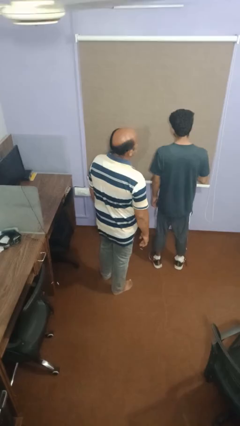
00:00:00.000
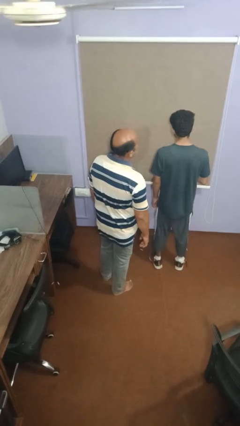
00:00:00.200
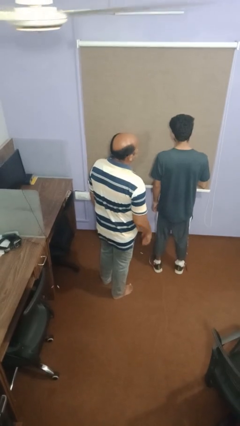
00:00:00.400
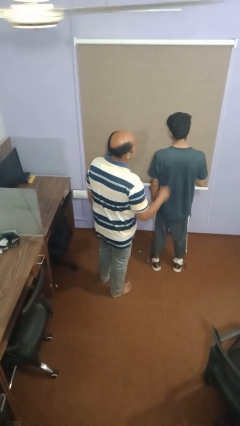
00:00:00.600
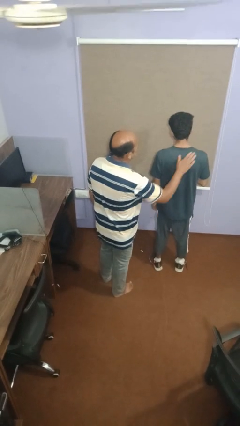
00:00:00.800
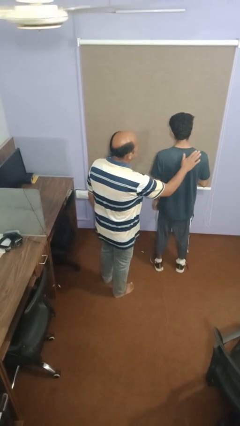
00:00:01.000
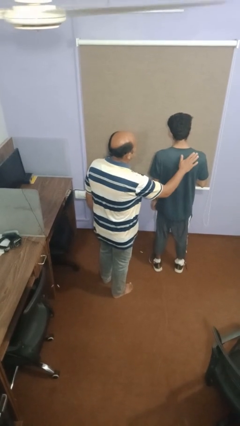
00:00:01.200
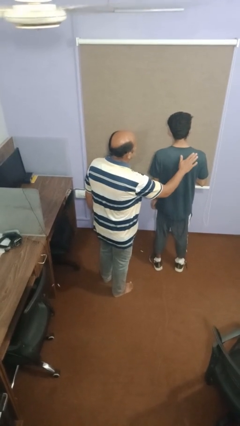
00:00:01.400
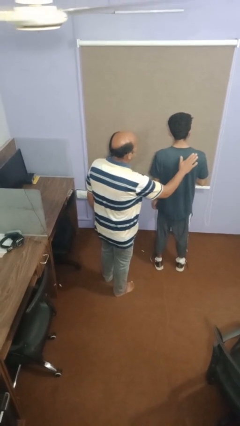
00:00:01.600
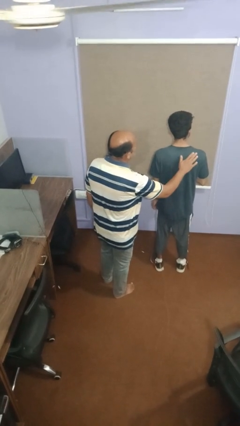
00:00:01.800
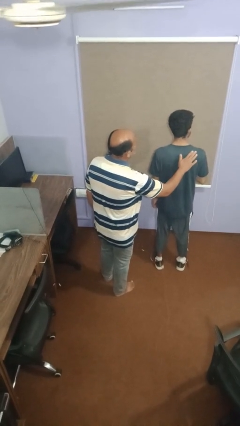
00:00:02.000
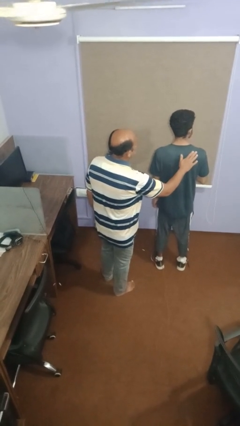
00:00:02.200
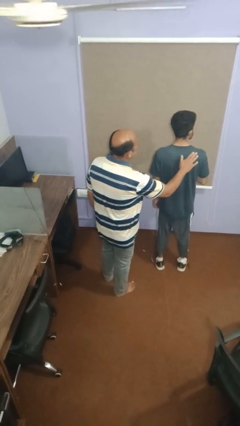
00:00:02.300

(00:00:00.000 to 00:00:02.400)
person touches back of person

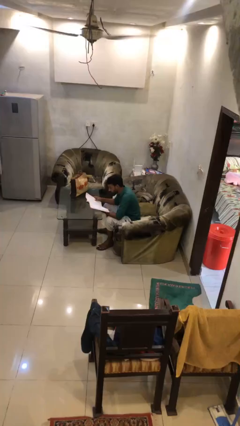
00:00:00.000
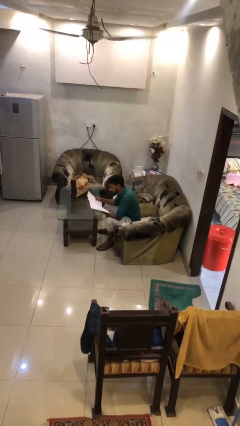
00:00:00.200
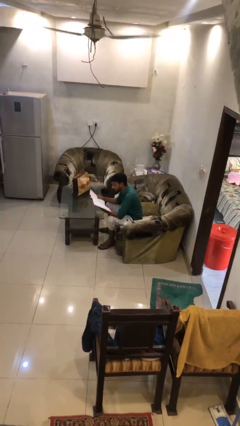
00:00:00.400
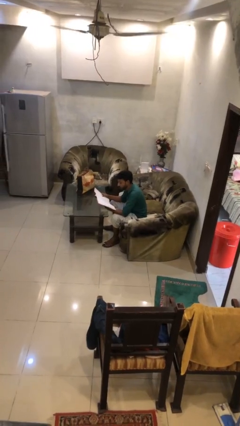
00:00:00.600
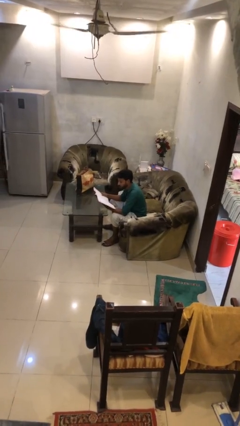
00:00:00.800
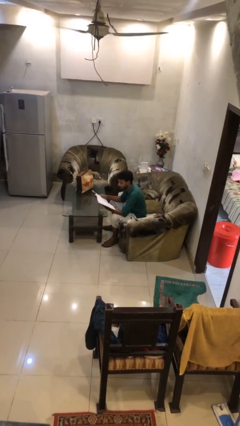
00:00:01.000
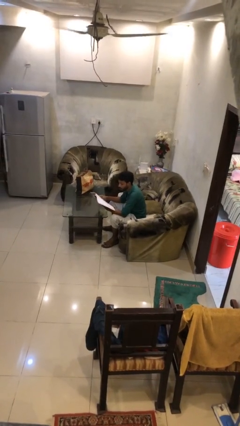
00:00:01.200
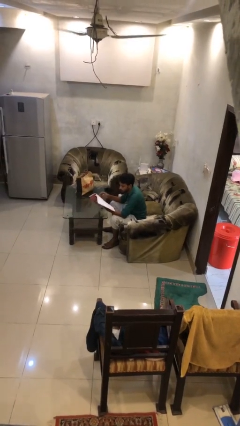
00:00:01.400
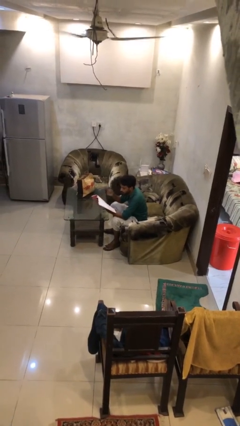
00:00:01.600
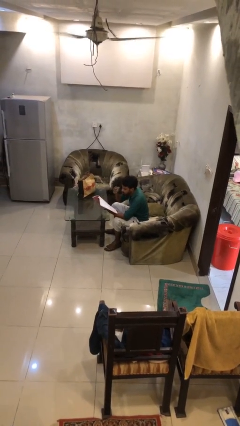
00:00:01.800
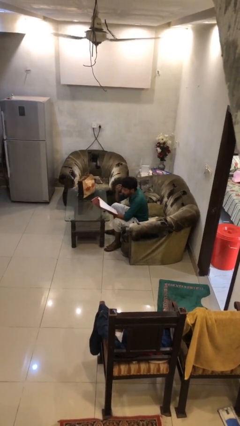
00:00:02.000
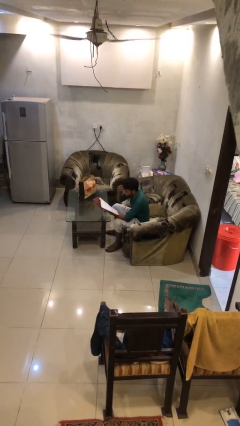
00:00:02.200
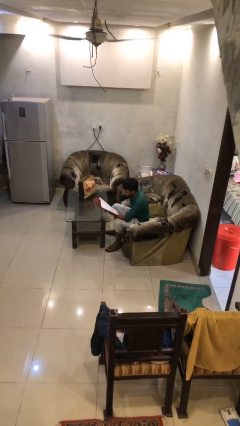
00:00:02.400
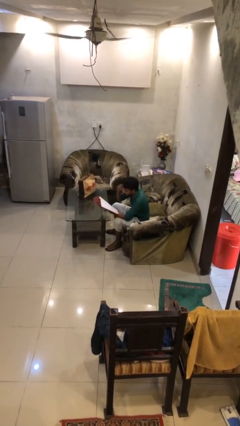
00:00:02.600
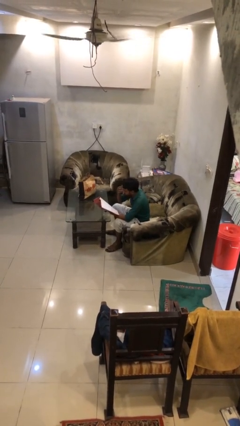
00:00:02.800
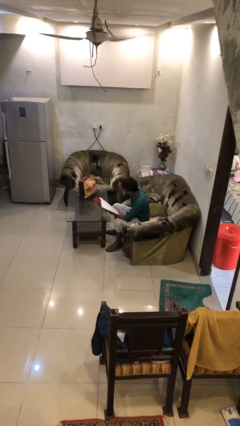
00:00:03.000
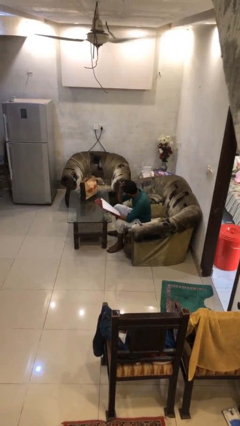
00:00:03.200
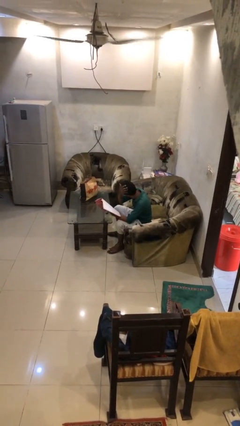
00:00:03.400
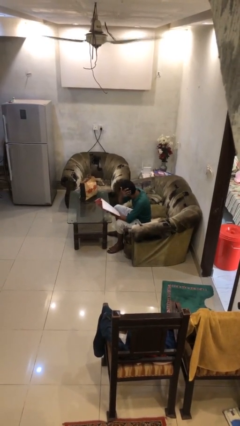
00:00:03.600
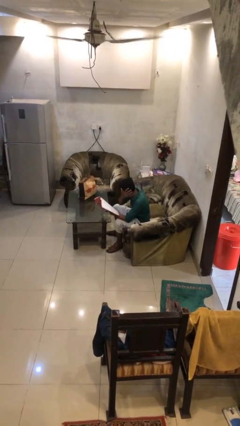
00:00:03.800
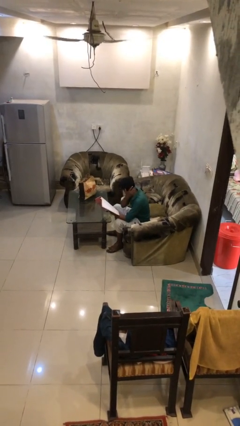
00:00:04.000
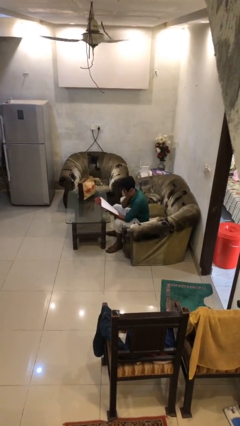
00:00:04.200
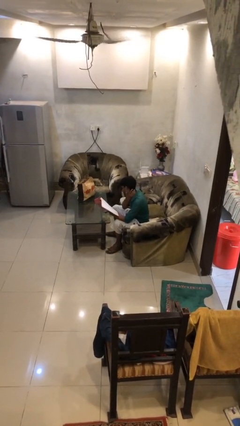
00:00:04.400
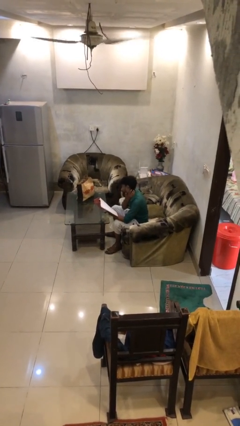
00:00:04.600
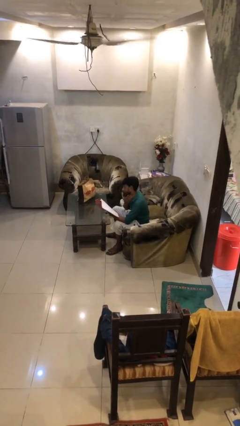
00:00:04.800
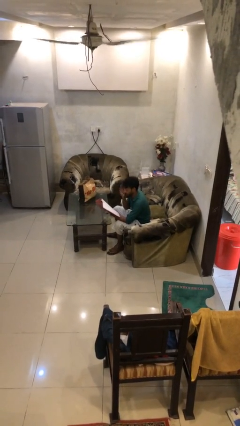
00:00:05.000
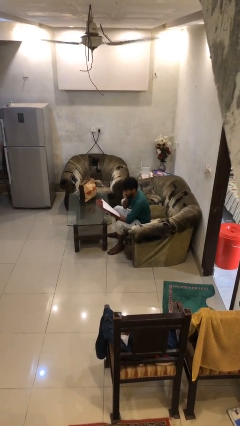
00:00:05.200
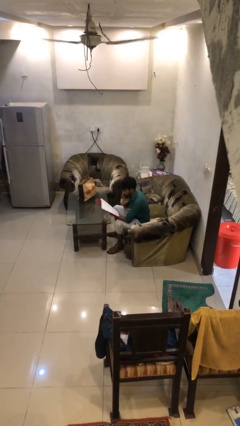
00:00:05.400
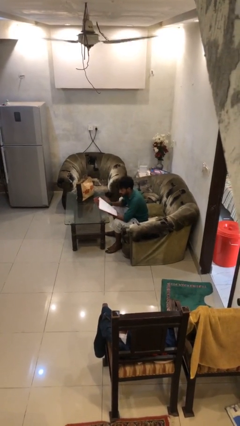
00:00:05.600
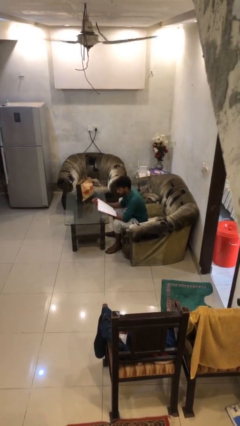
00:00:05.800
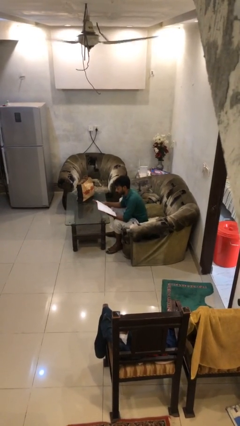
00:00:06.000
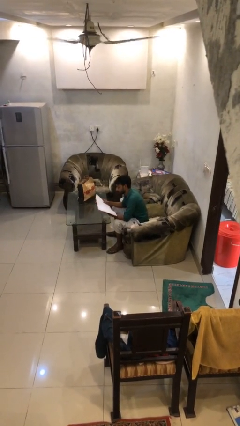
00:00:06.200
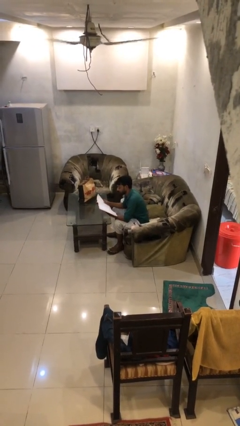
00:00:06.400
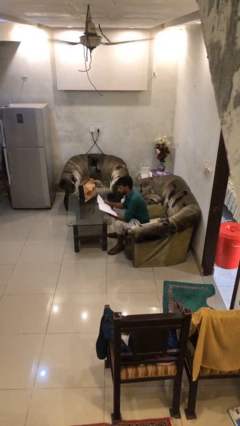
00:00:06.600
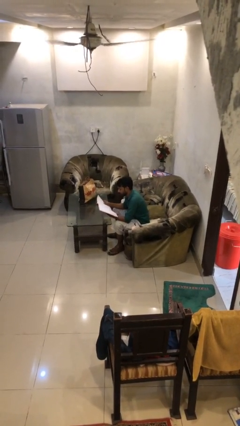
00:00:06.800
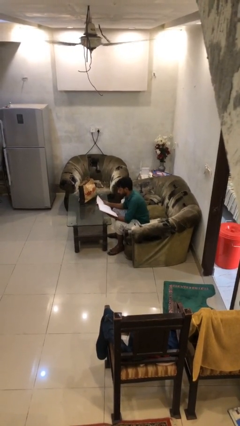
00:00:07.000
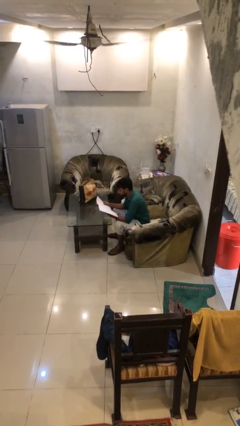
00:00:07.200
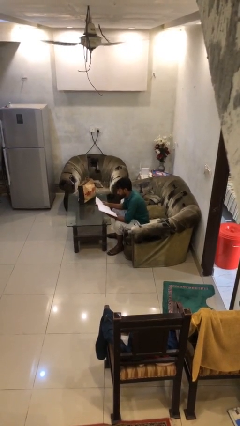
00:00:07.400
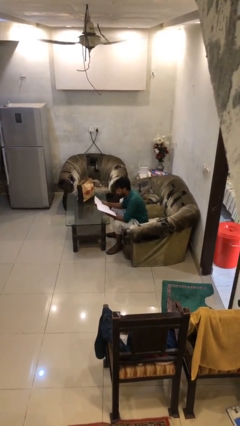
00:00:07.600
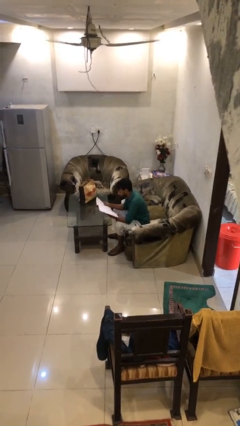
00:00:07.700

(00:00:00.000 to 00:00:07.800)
person reads document

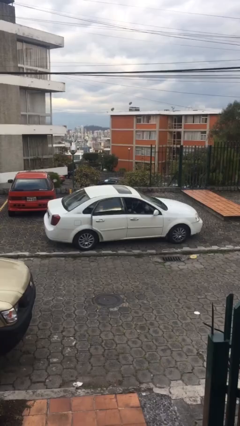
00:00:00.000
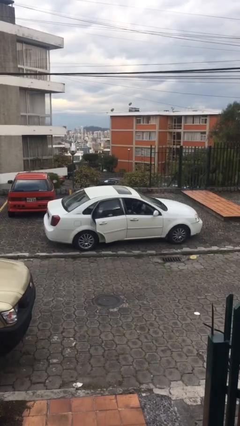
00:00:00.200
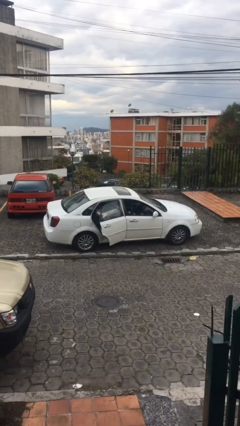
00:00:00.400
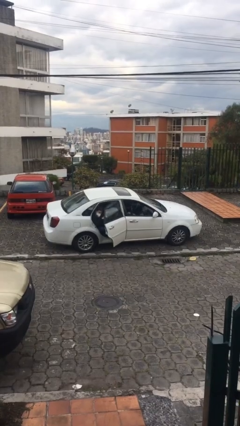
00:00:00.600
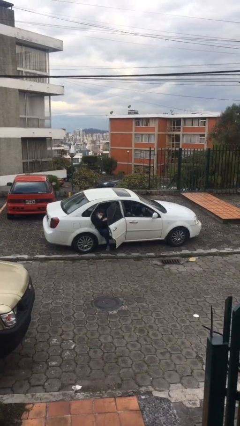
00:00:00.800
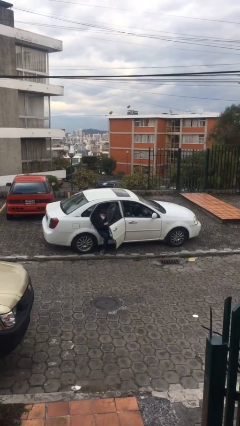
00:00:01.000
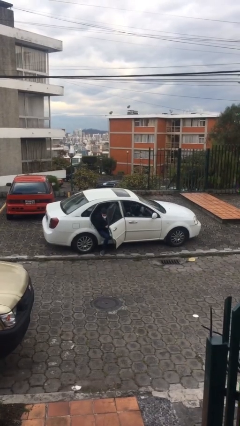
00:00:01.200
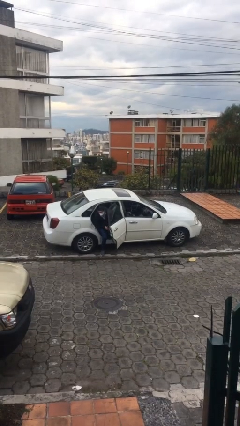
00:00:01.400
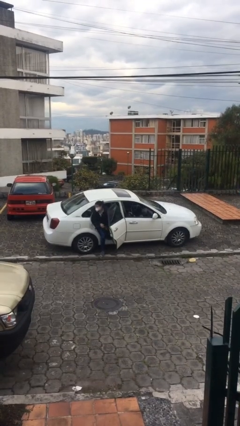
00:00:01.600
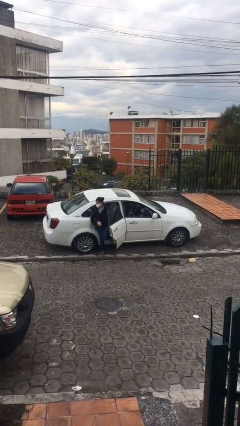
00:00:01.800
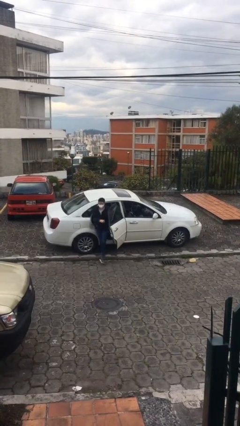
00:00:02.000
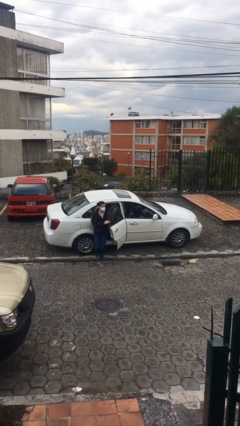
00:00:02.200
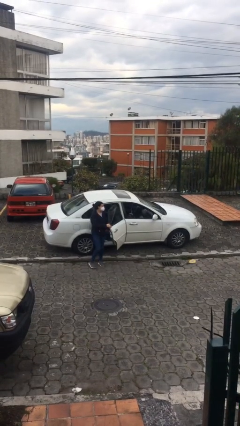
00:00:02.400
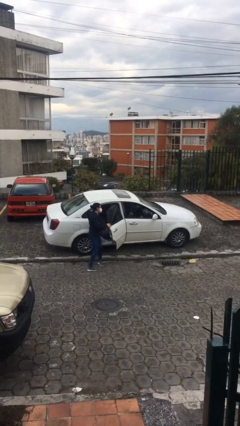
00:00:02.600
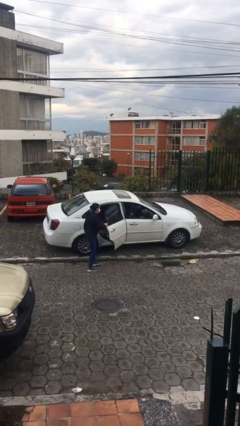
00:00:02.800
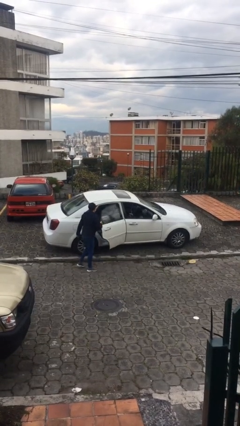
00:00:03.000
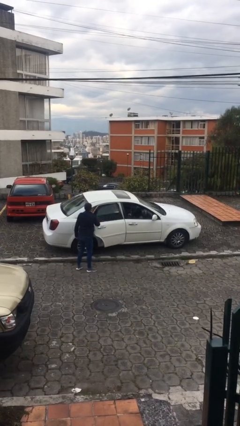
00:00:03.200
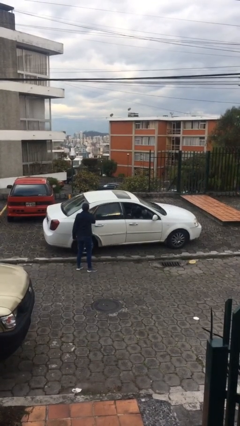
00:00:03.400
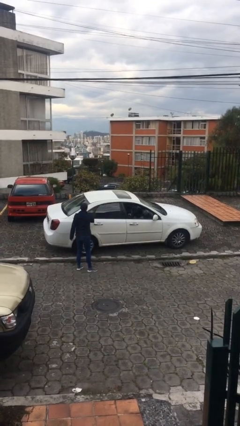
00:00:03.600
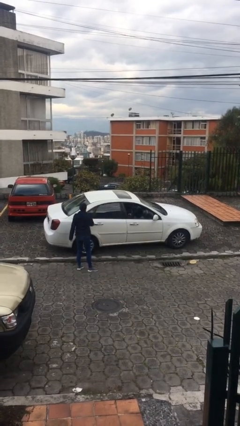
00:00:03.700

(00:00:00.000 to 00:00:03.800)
car drops off person

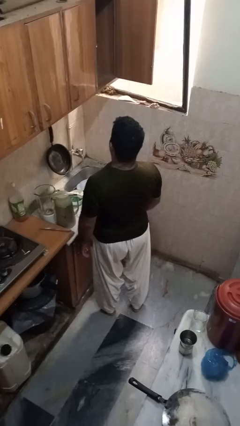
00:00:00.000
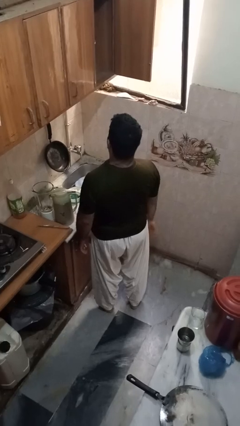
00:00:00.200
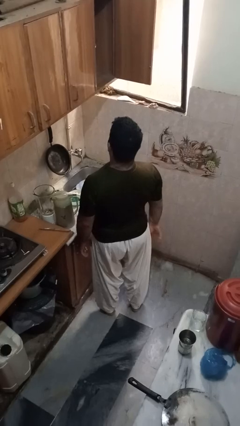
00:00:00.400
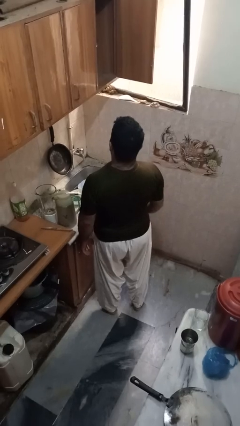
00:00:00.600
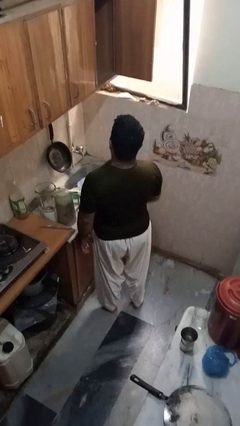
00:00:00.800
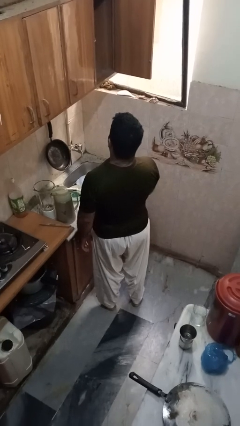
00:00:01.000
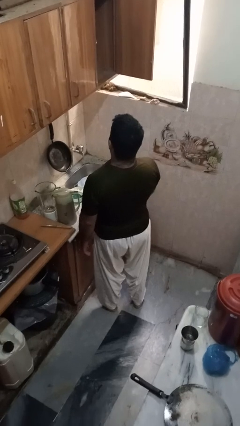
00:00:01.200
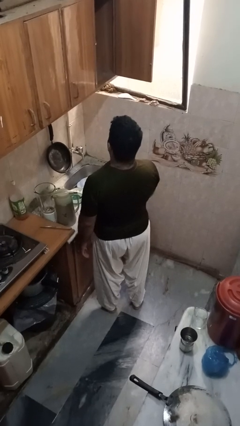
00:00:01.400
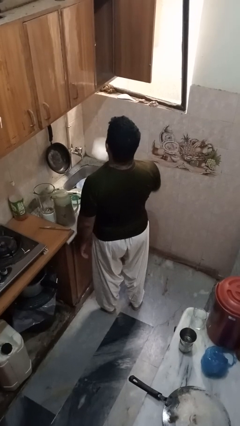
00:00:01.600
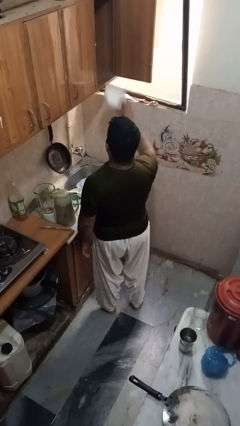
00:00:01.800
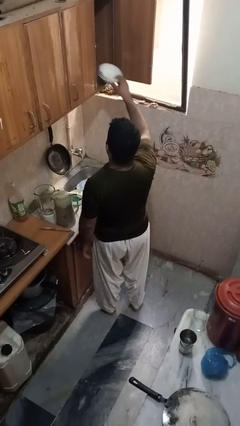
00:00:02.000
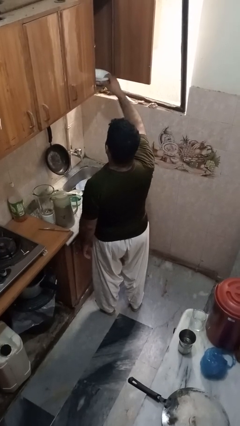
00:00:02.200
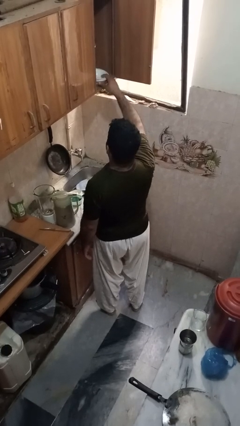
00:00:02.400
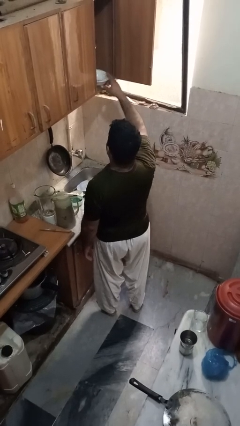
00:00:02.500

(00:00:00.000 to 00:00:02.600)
person puts object in cabinet

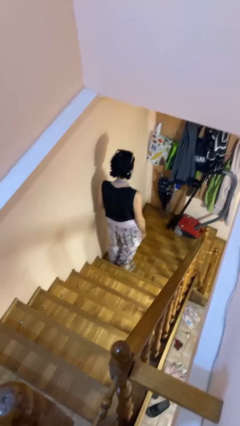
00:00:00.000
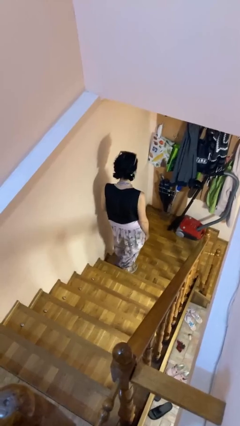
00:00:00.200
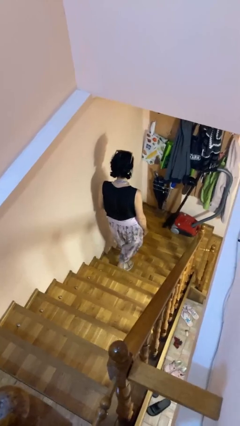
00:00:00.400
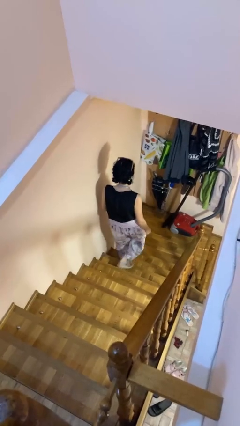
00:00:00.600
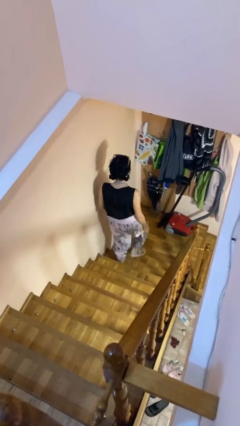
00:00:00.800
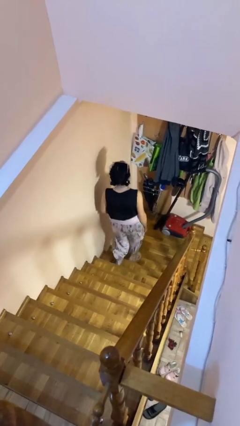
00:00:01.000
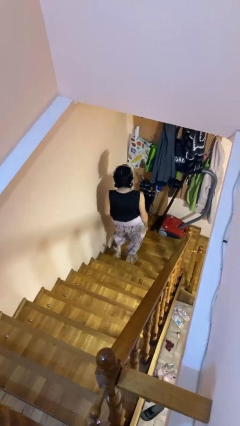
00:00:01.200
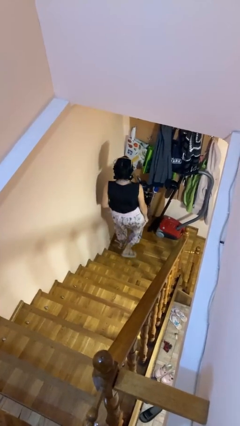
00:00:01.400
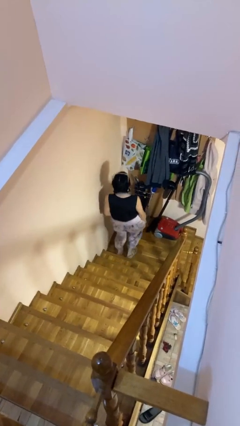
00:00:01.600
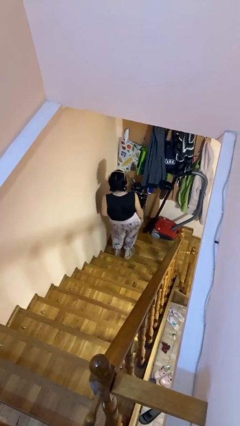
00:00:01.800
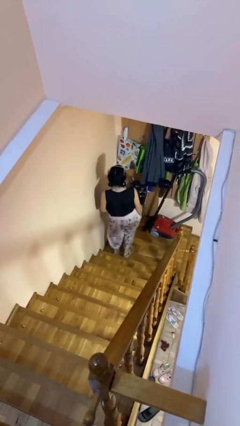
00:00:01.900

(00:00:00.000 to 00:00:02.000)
person climbs down stairs
